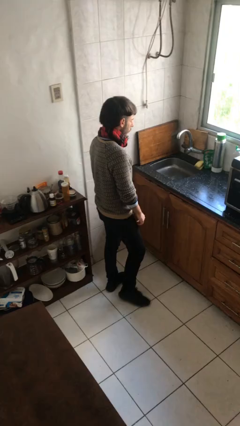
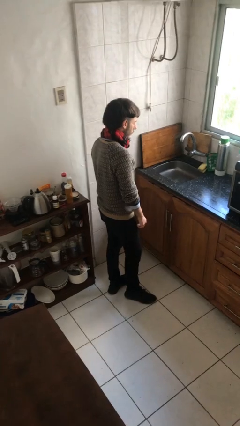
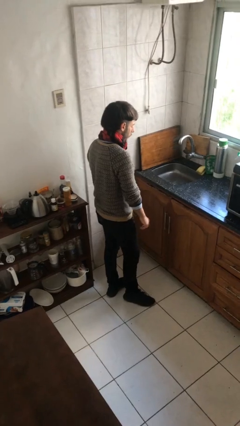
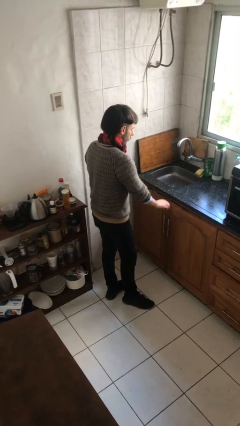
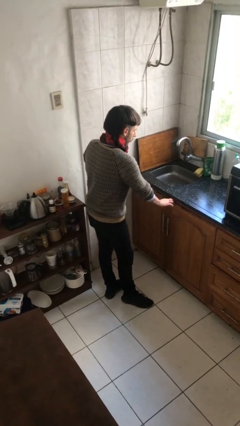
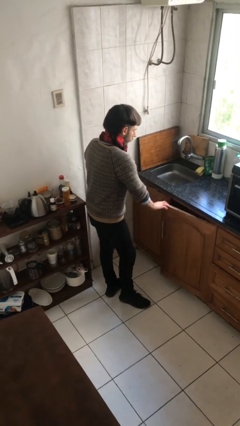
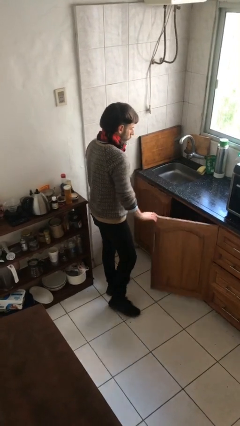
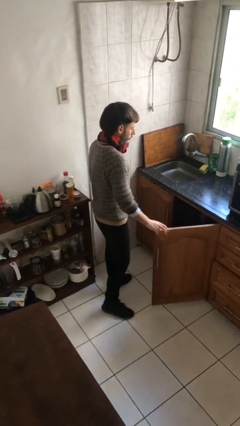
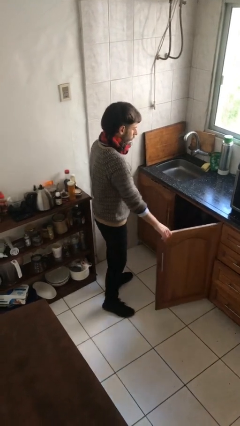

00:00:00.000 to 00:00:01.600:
person closes cabinet

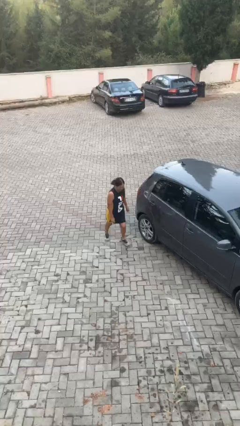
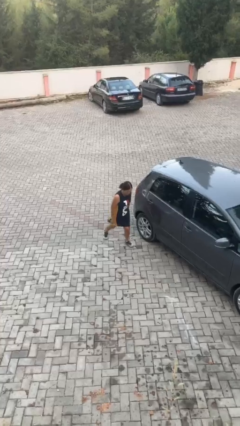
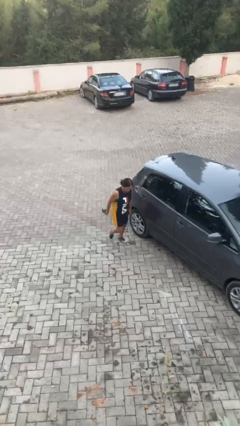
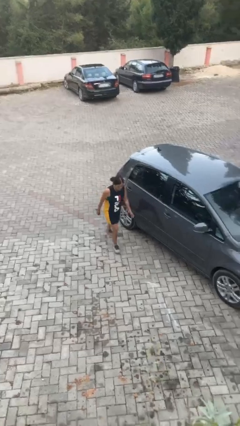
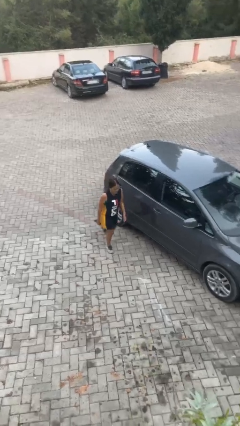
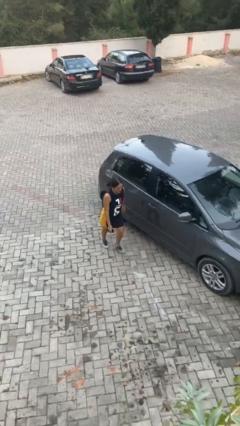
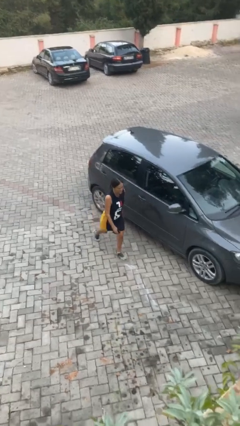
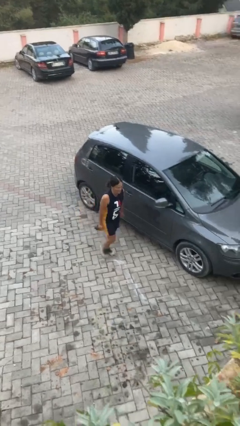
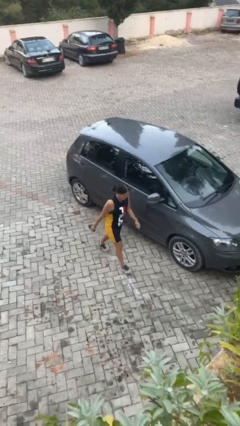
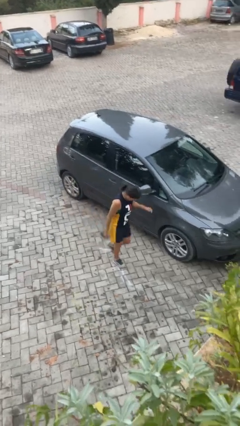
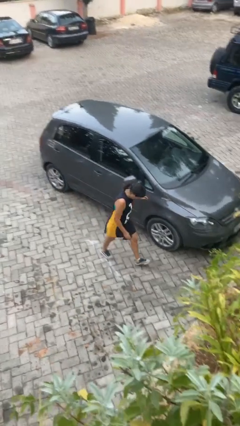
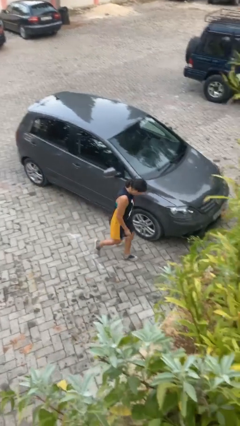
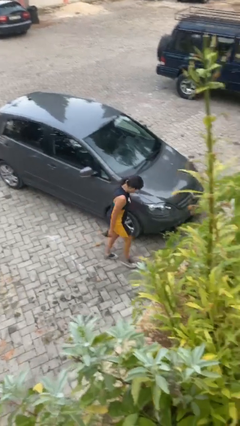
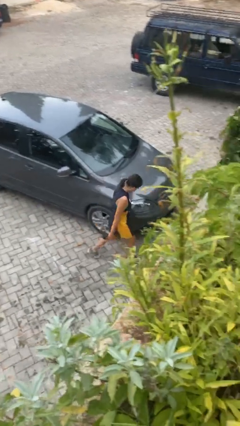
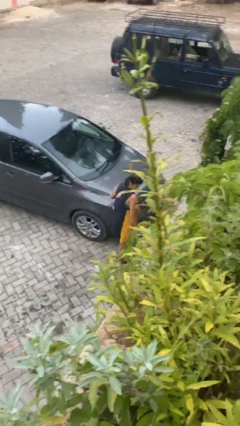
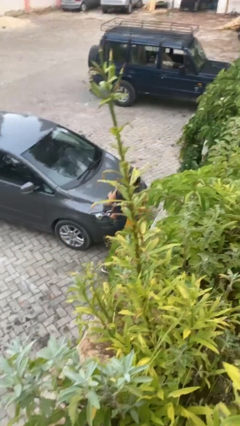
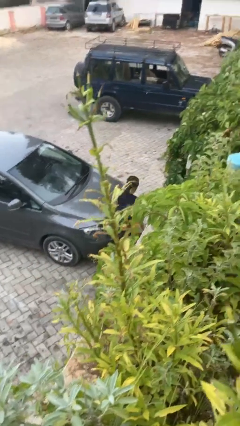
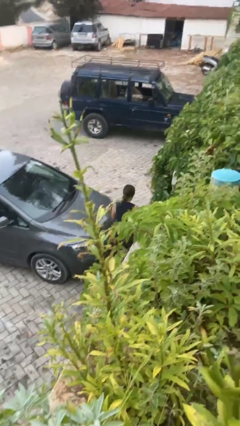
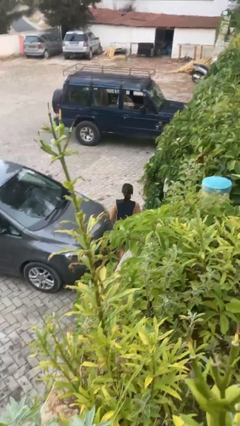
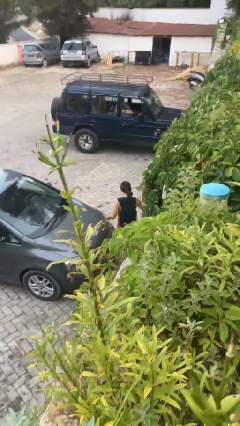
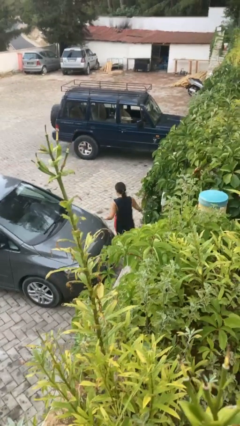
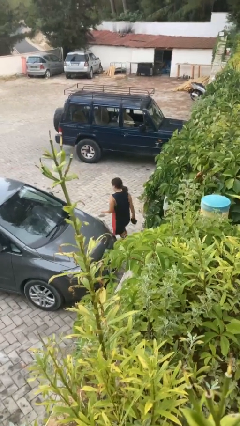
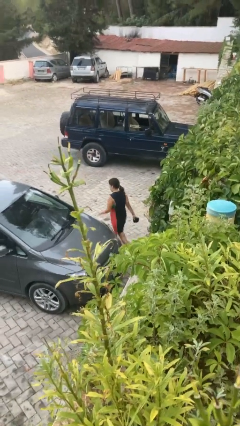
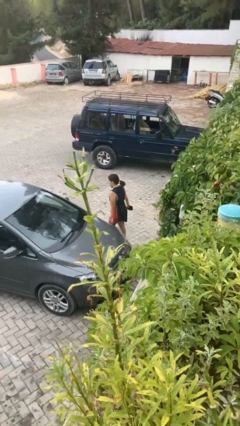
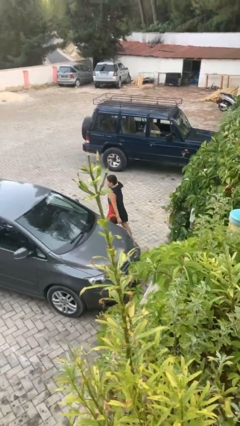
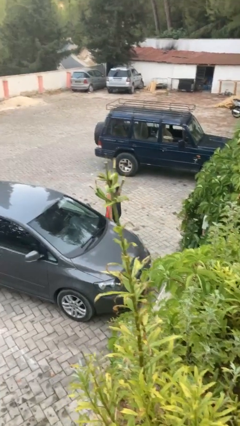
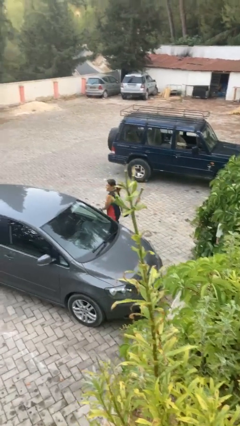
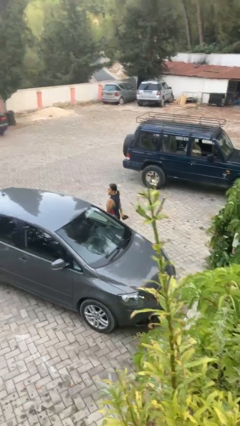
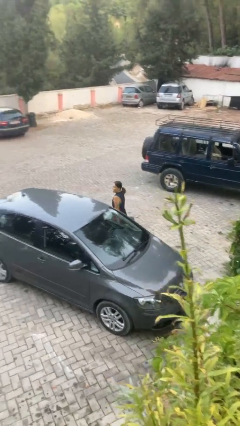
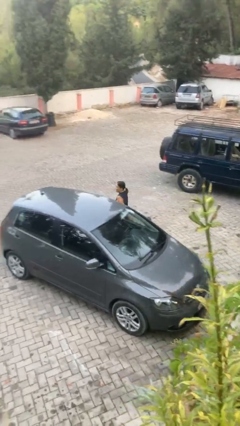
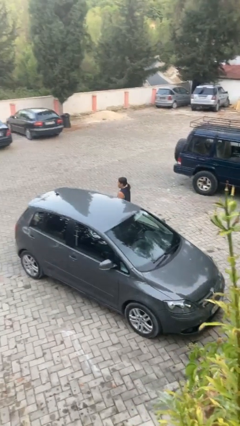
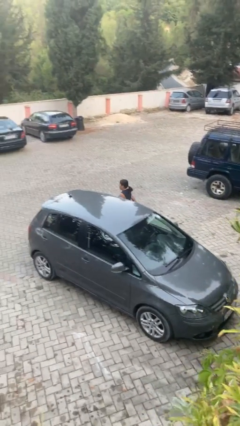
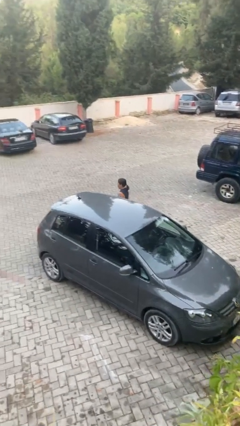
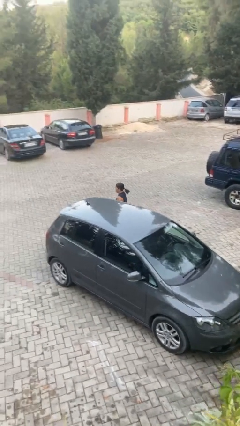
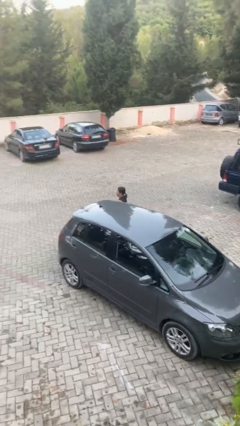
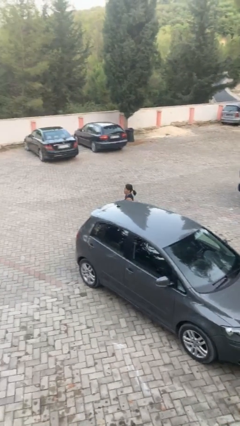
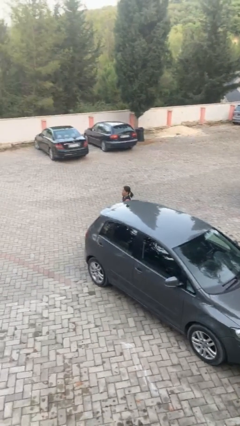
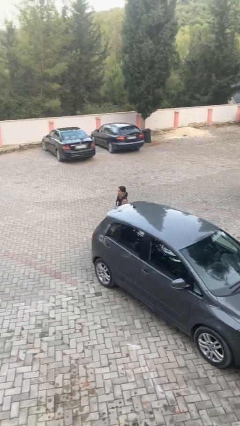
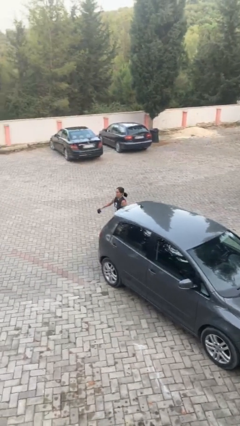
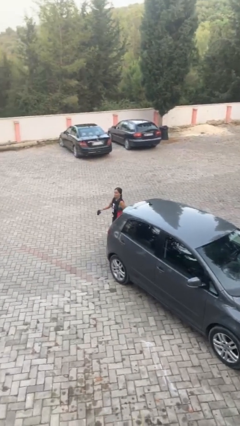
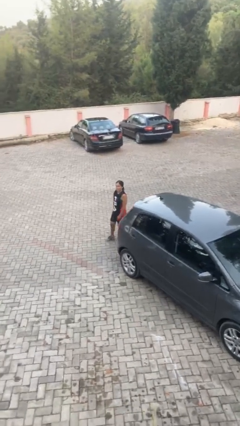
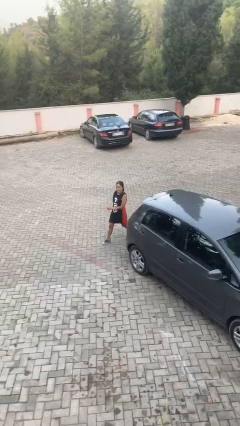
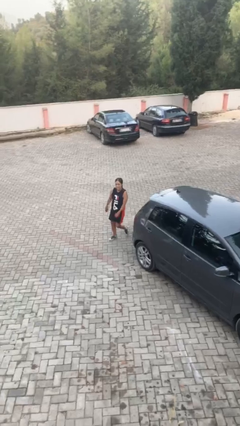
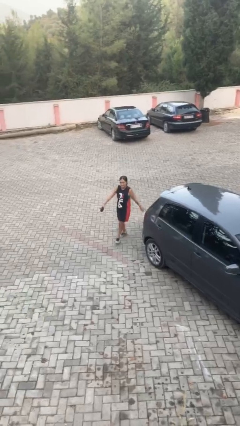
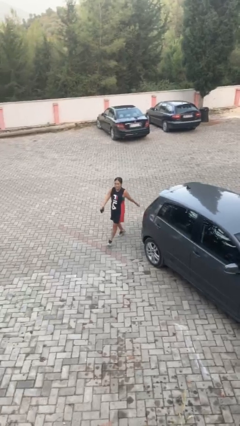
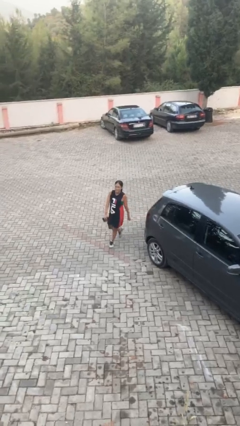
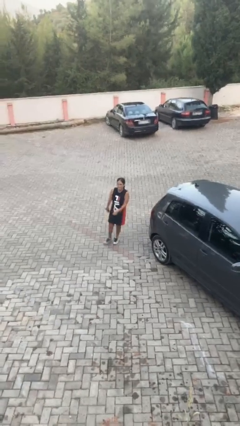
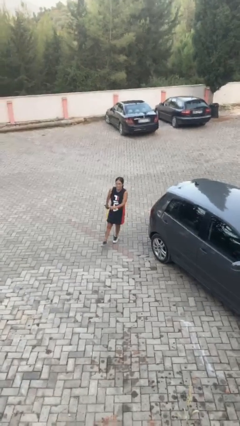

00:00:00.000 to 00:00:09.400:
person walks around car

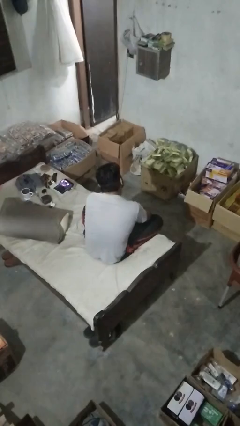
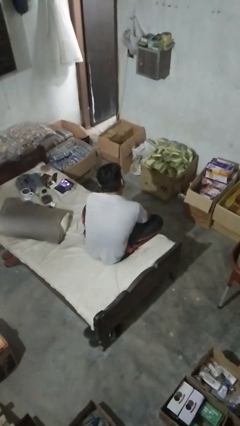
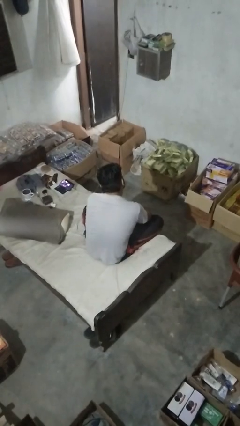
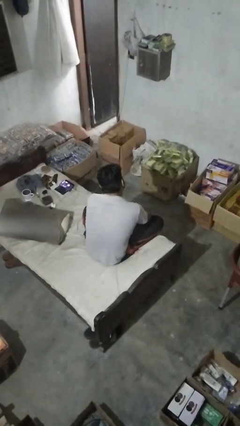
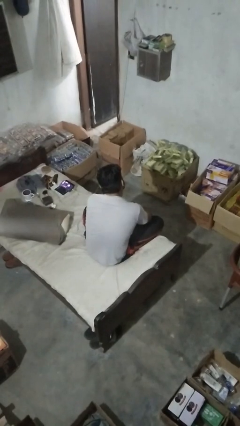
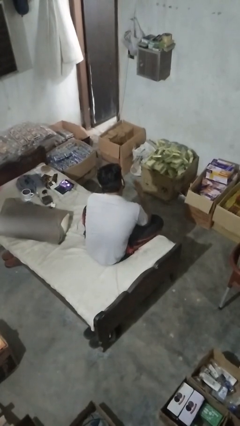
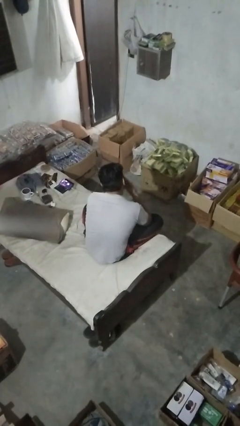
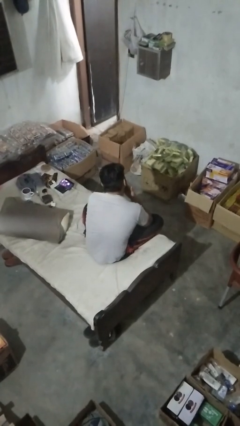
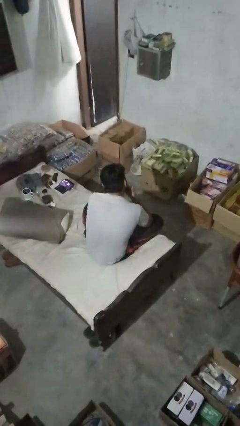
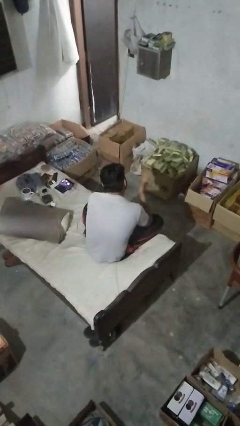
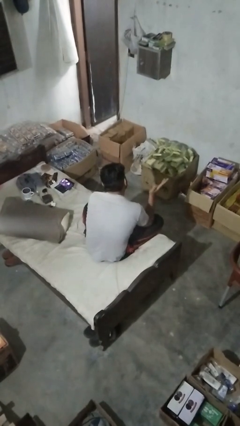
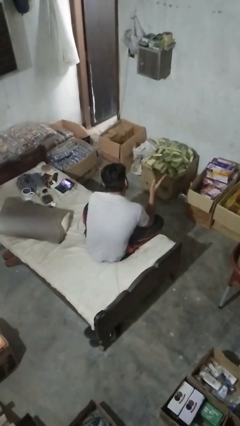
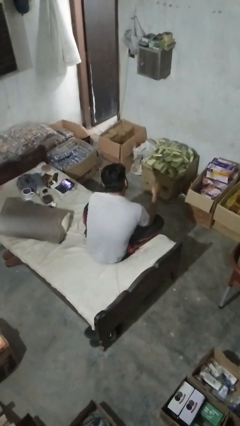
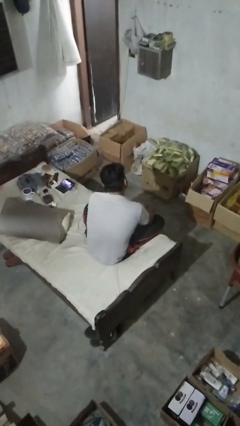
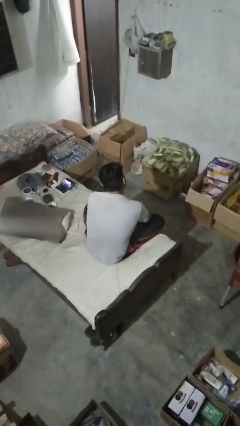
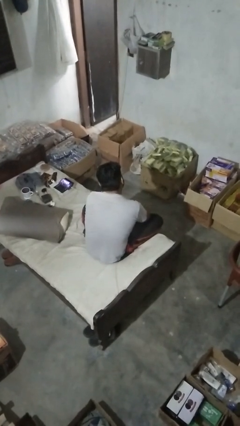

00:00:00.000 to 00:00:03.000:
person gestures blow kiss

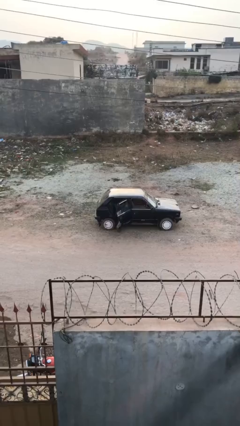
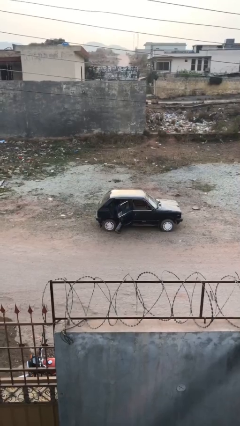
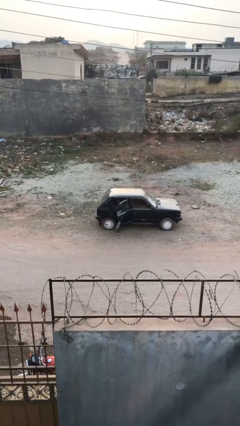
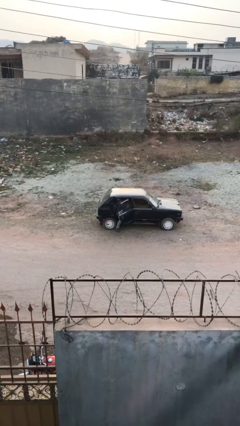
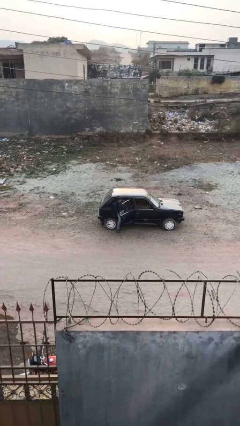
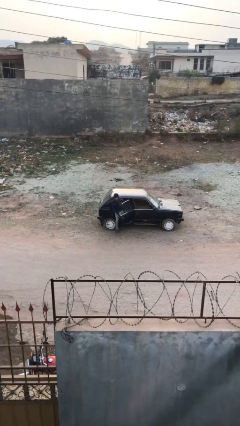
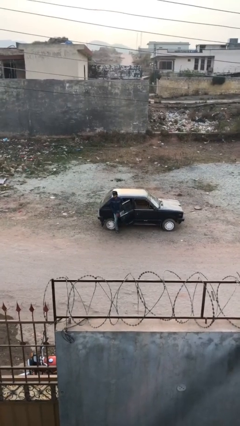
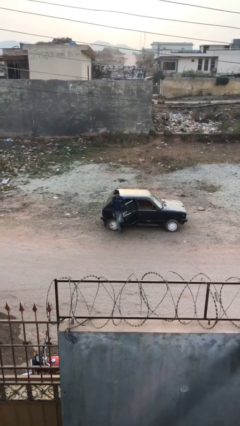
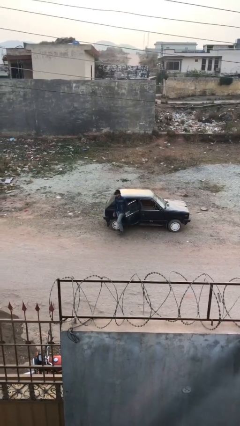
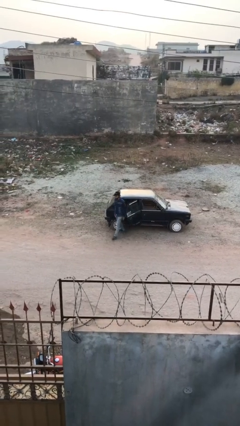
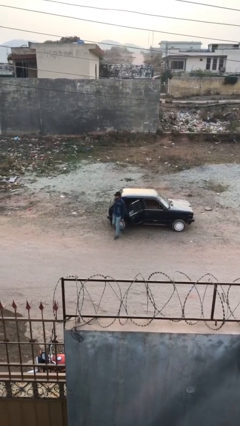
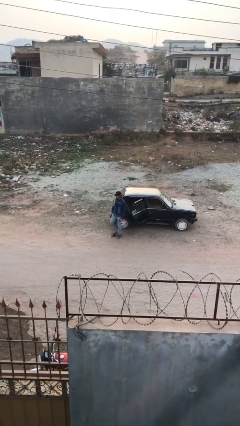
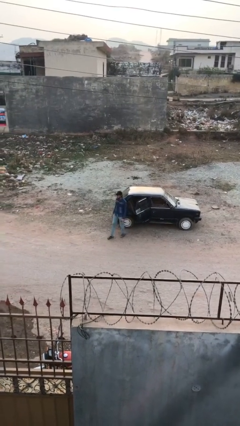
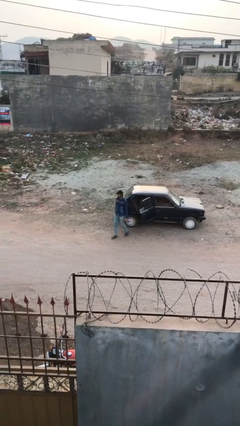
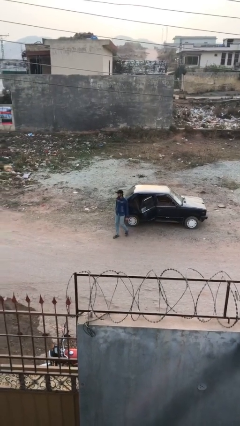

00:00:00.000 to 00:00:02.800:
person exits car

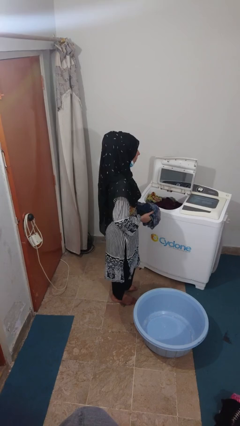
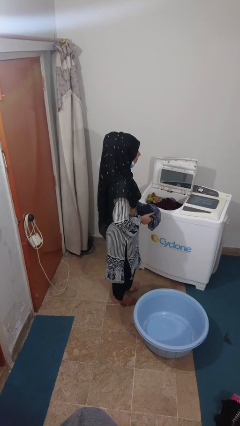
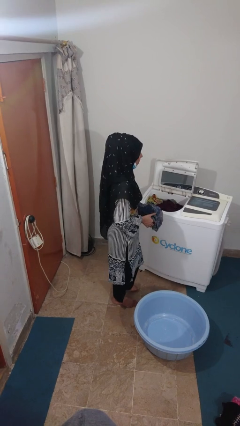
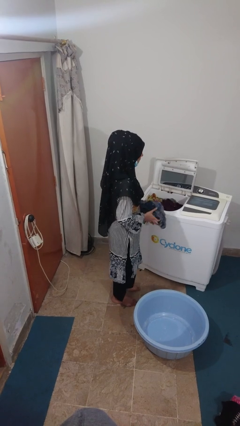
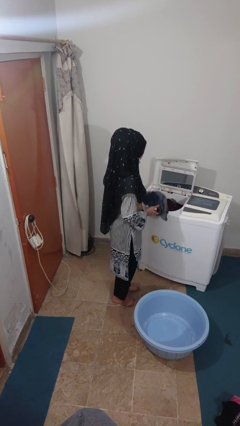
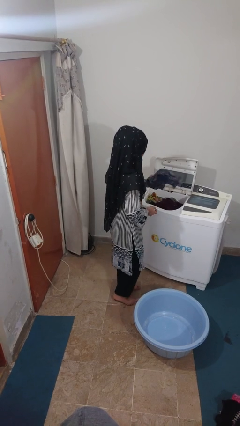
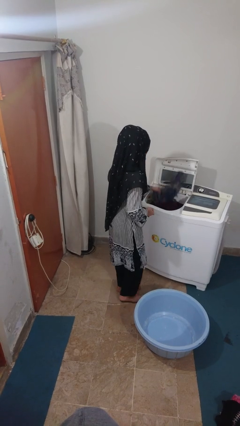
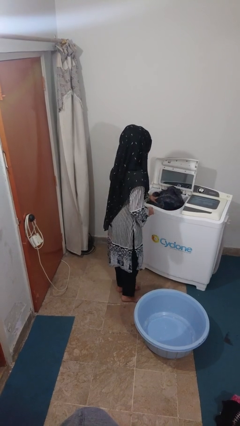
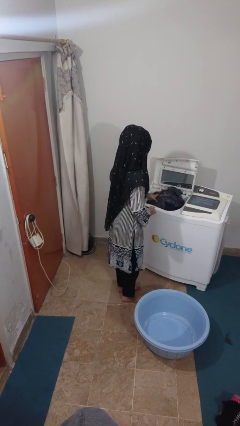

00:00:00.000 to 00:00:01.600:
person loads clotheswasher
